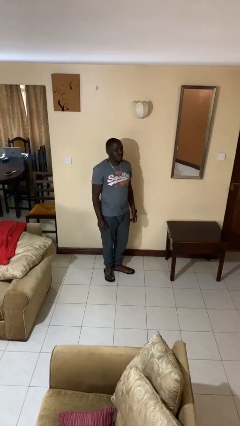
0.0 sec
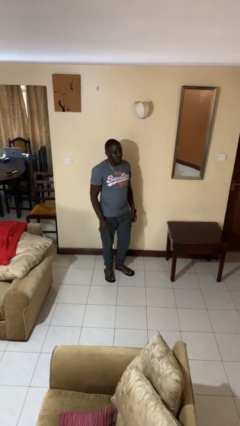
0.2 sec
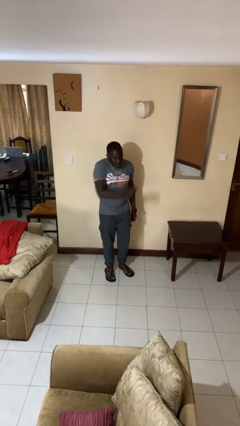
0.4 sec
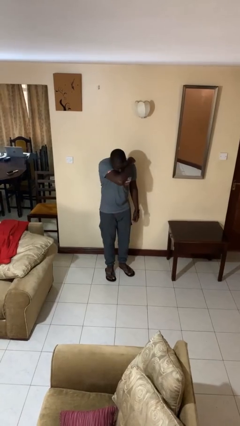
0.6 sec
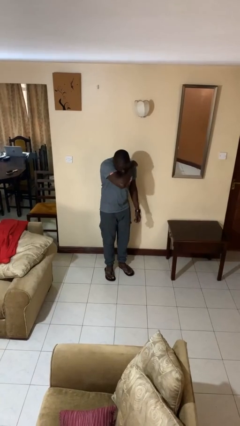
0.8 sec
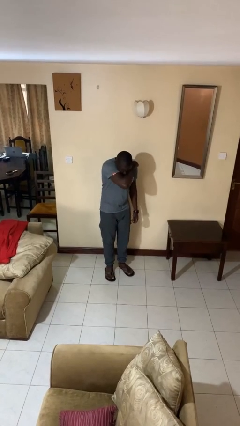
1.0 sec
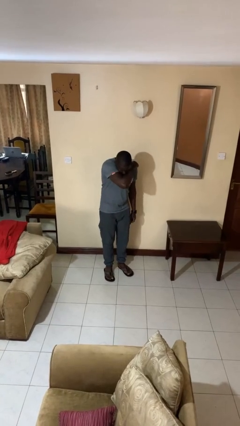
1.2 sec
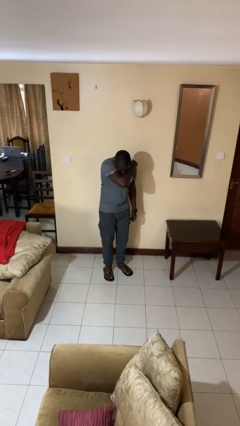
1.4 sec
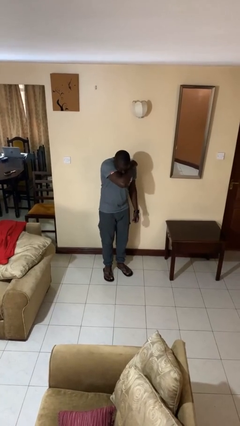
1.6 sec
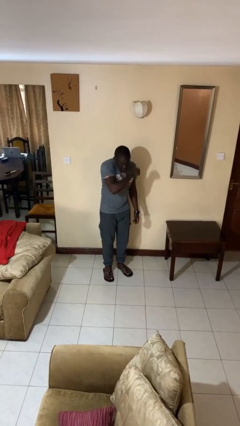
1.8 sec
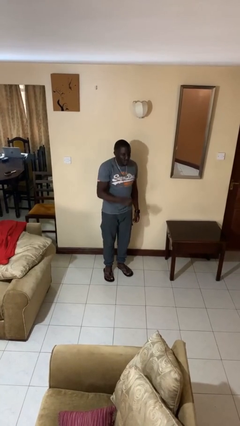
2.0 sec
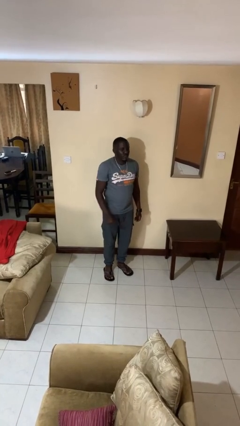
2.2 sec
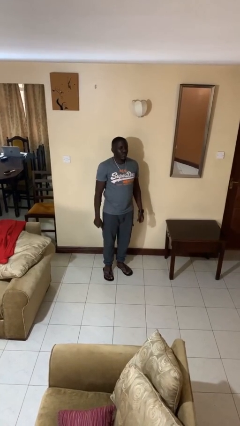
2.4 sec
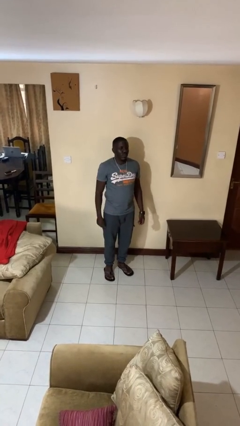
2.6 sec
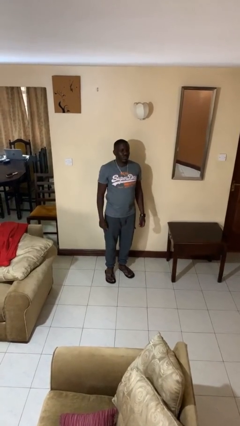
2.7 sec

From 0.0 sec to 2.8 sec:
person sneezes into arm

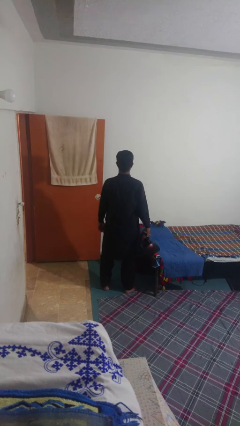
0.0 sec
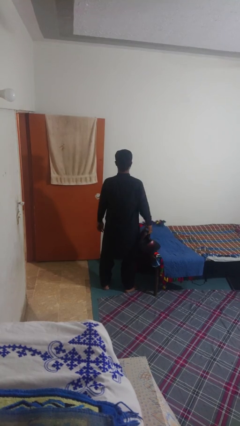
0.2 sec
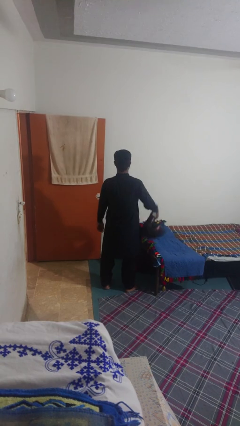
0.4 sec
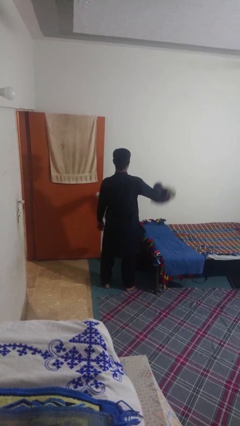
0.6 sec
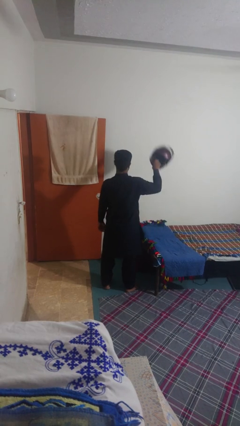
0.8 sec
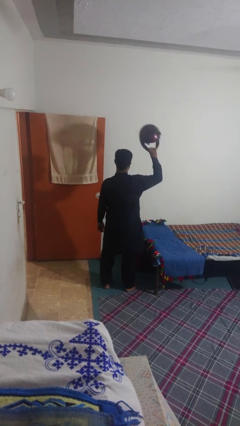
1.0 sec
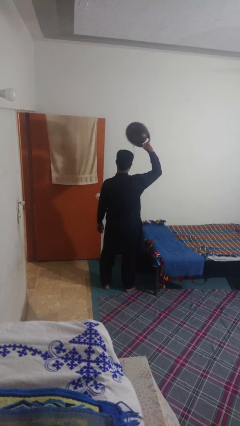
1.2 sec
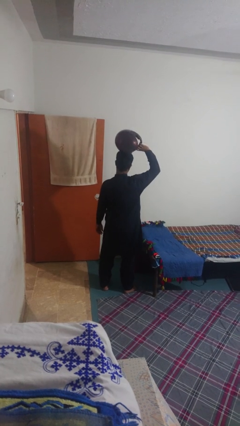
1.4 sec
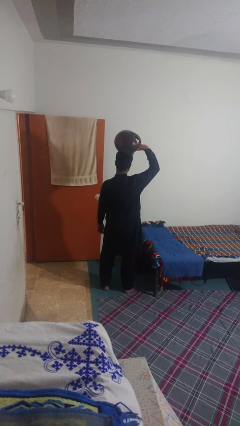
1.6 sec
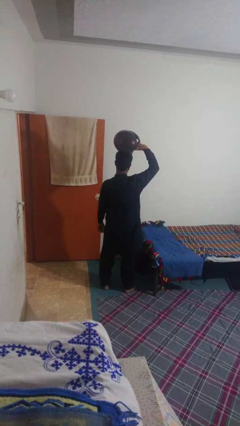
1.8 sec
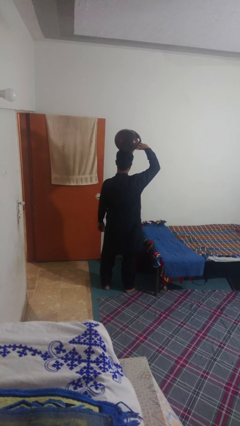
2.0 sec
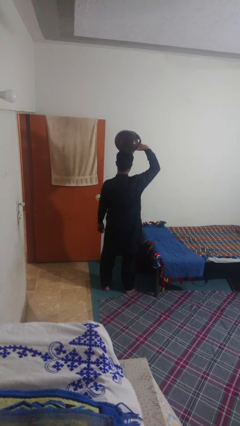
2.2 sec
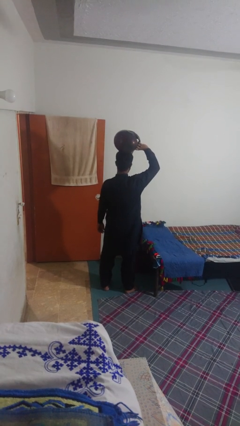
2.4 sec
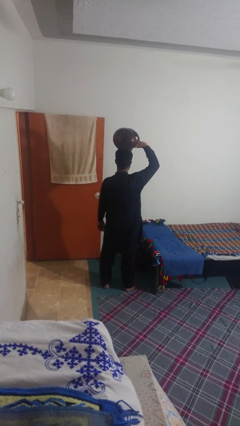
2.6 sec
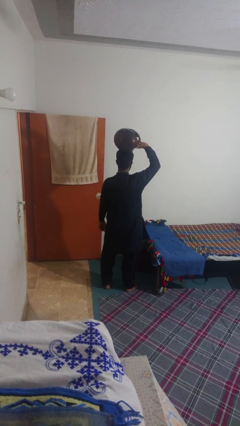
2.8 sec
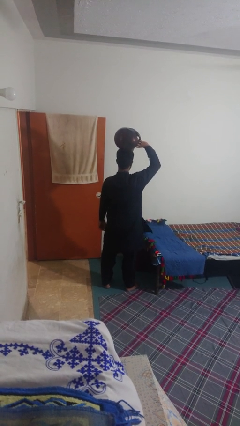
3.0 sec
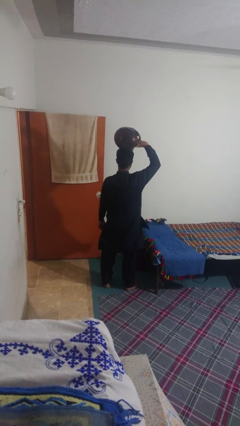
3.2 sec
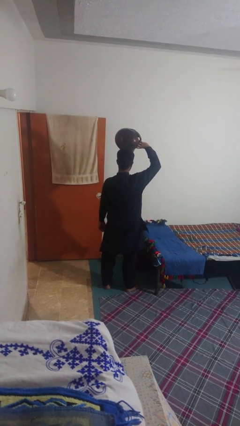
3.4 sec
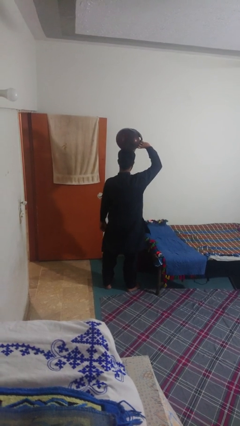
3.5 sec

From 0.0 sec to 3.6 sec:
person holds object above head

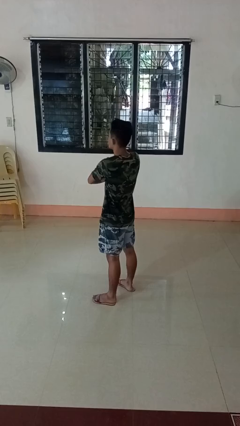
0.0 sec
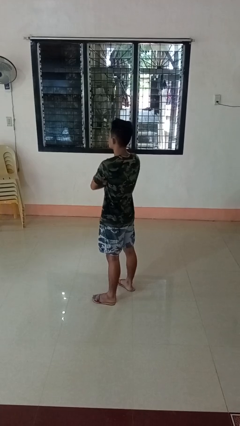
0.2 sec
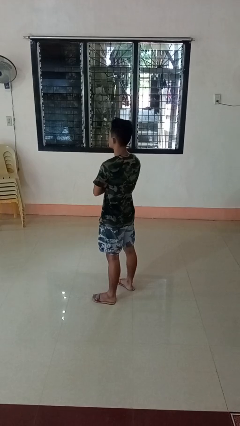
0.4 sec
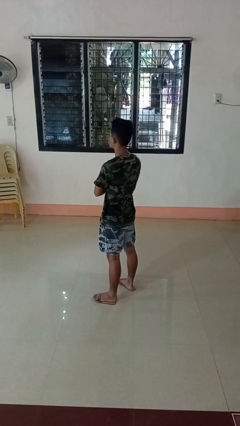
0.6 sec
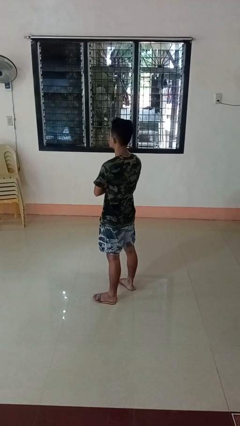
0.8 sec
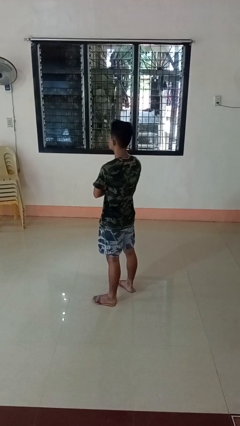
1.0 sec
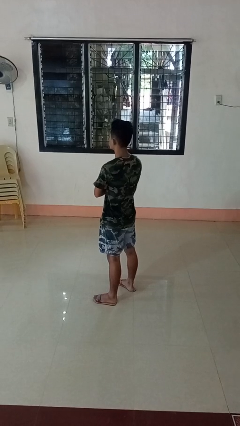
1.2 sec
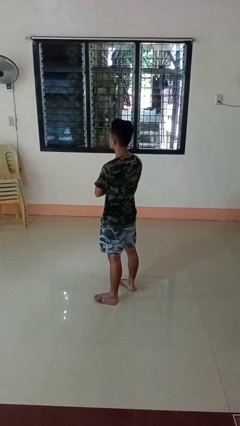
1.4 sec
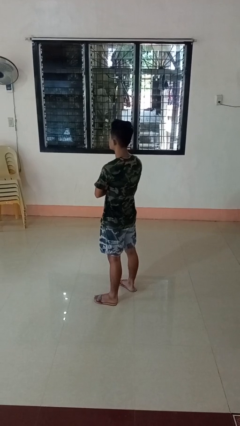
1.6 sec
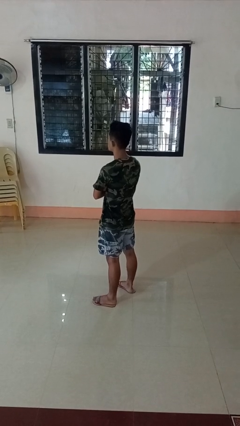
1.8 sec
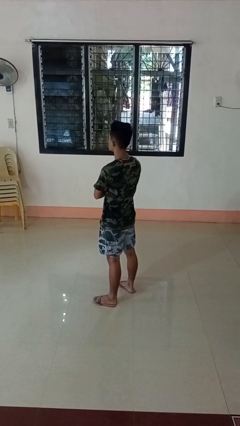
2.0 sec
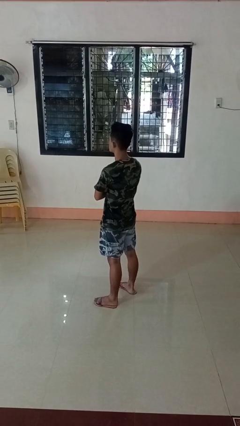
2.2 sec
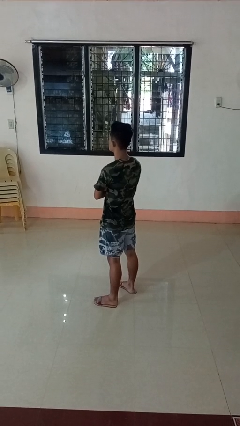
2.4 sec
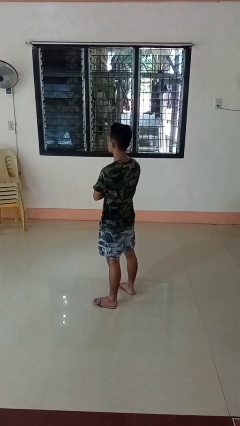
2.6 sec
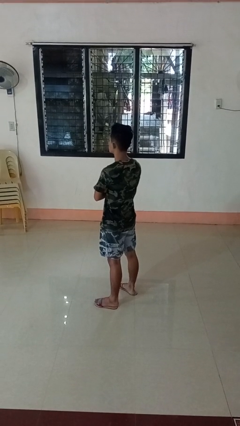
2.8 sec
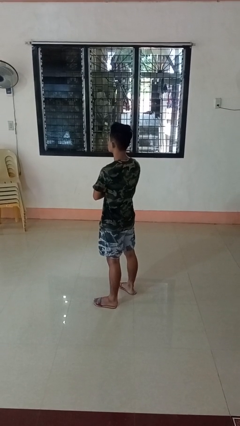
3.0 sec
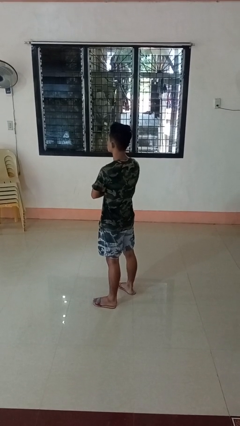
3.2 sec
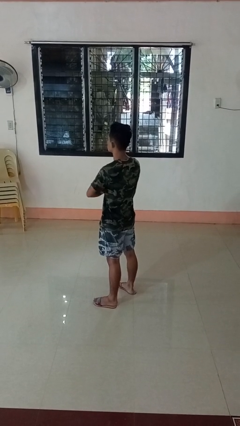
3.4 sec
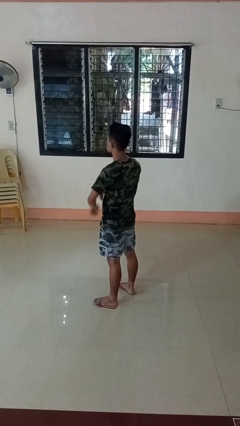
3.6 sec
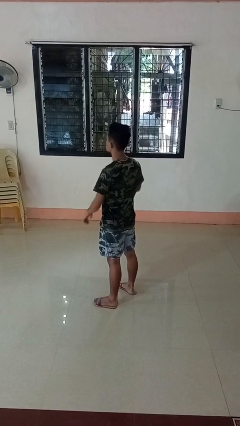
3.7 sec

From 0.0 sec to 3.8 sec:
person crosses arms

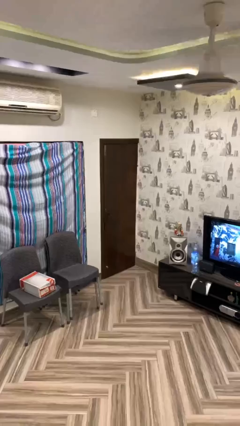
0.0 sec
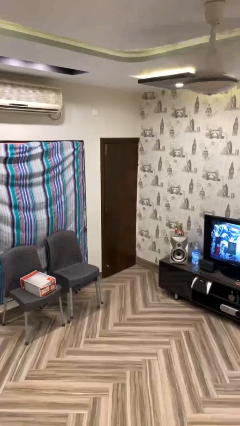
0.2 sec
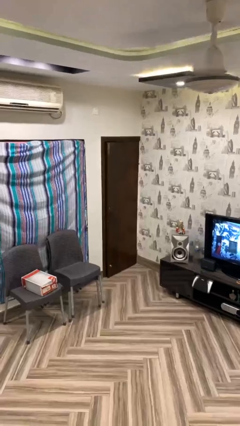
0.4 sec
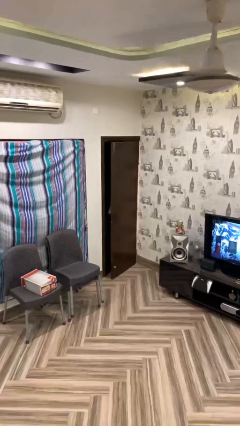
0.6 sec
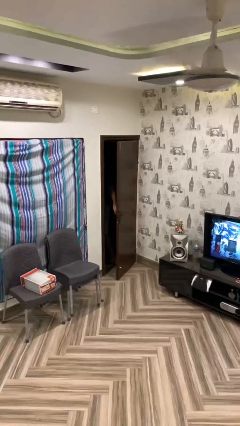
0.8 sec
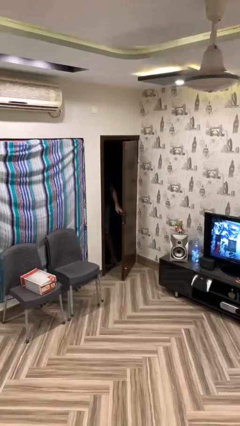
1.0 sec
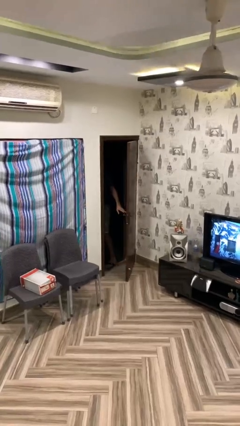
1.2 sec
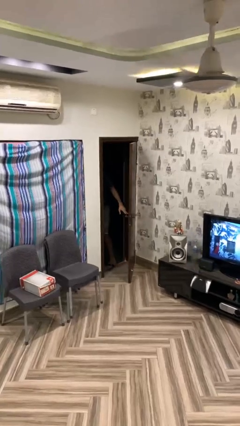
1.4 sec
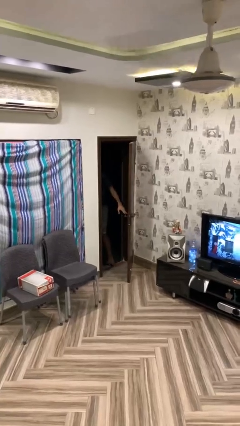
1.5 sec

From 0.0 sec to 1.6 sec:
person opens facility door

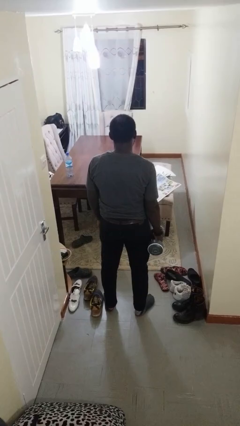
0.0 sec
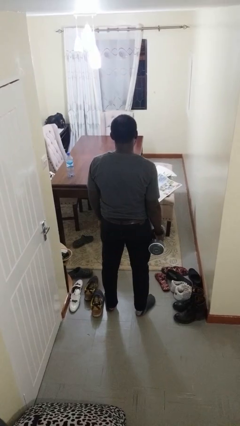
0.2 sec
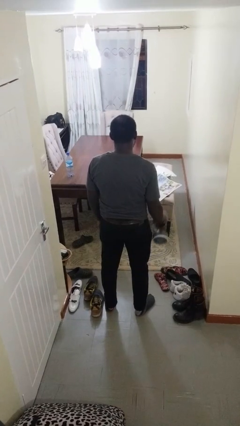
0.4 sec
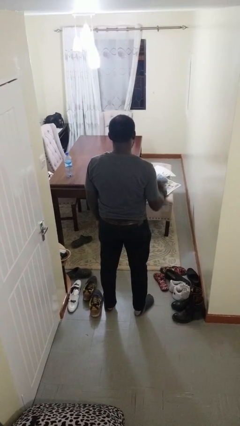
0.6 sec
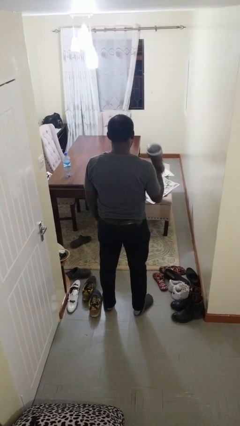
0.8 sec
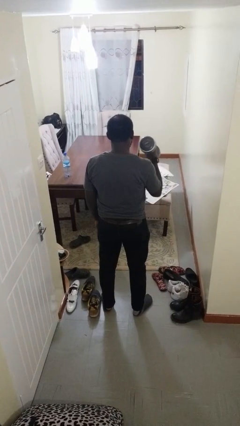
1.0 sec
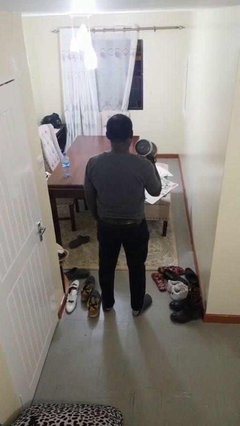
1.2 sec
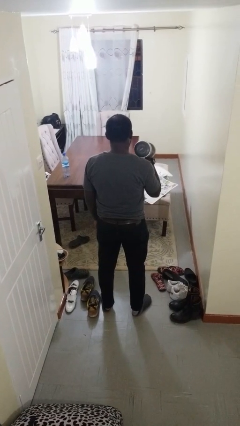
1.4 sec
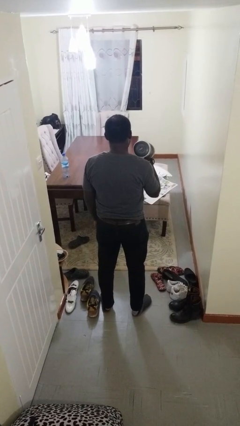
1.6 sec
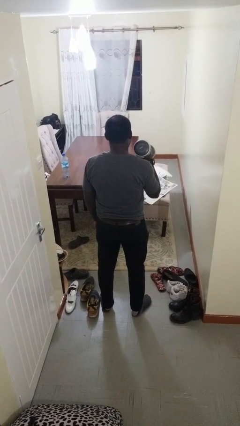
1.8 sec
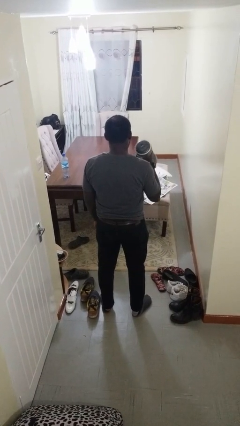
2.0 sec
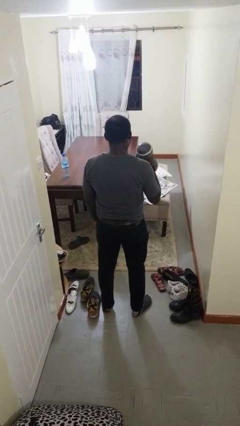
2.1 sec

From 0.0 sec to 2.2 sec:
person lifts dumbbells

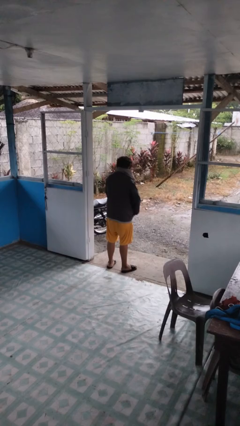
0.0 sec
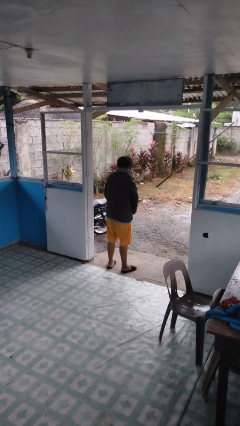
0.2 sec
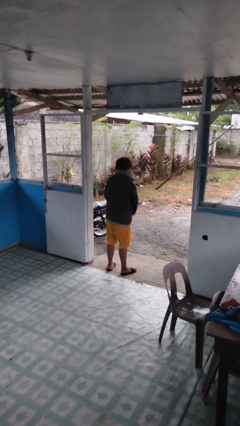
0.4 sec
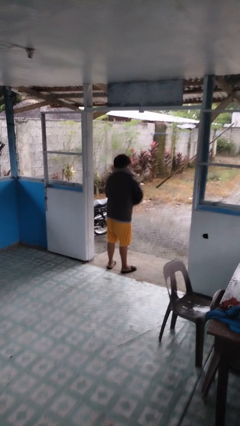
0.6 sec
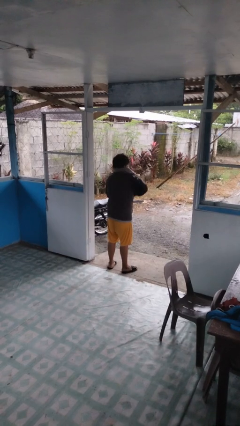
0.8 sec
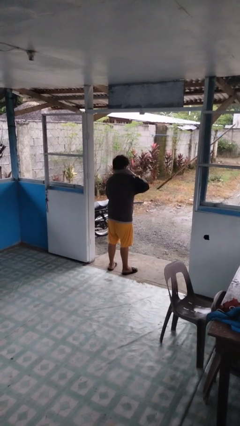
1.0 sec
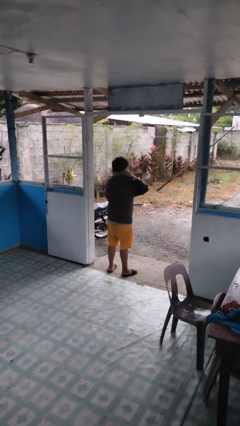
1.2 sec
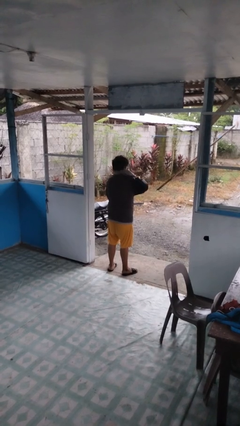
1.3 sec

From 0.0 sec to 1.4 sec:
person zips up jacket

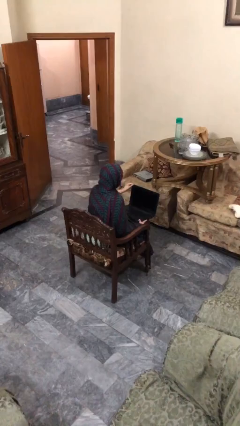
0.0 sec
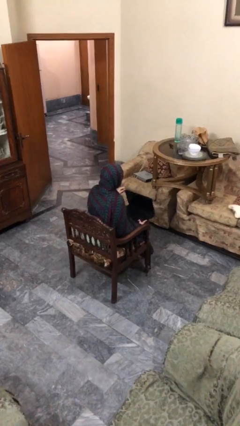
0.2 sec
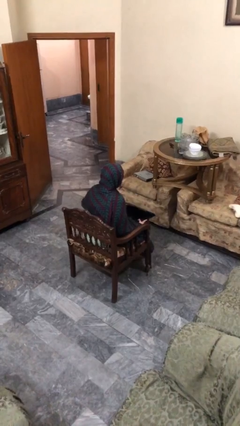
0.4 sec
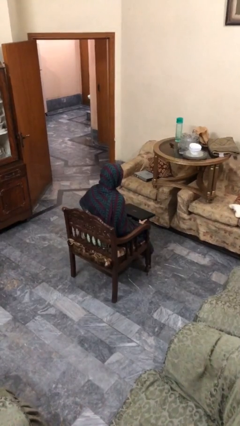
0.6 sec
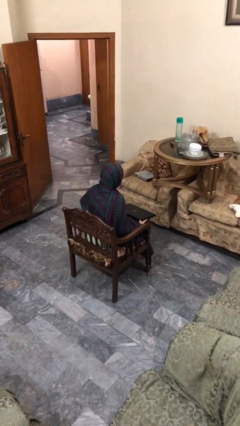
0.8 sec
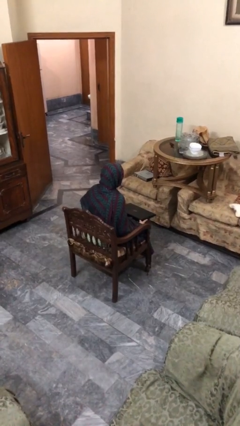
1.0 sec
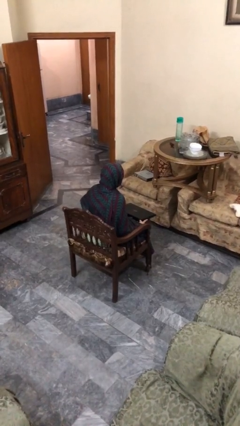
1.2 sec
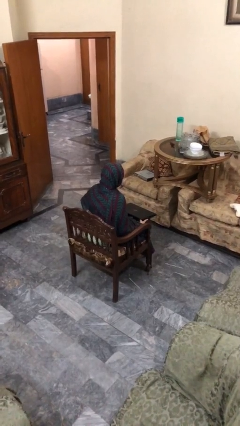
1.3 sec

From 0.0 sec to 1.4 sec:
person closes laptop

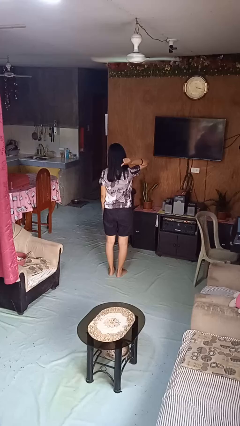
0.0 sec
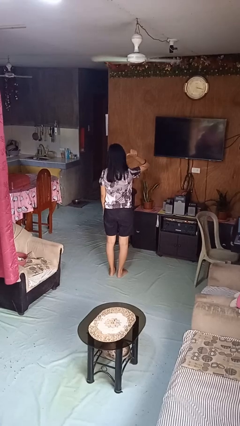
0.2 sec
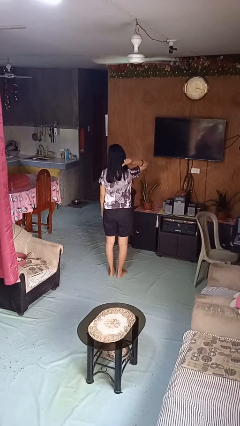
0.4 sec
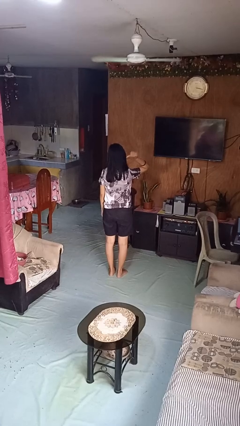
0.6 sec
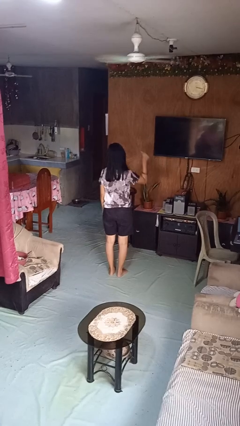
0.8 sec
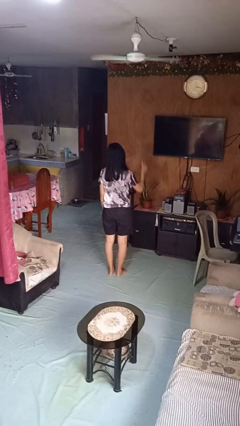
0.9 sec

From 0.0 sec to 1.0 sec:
person gestures behind me
